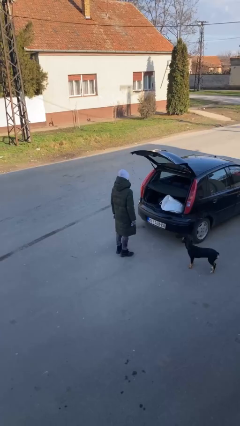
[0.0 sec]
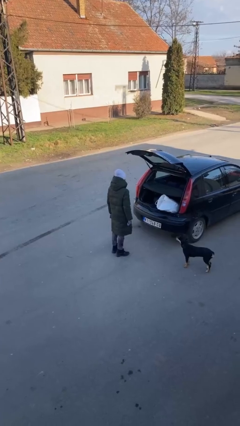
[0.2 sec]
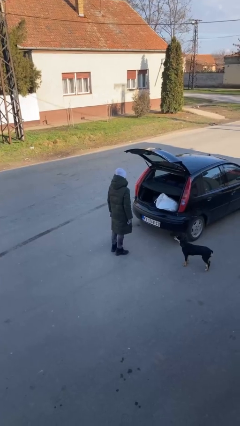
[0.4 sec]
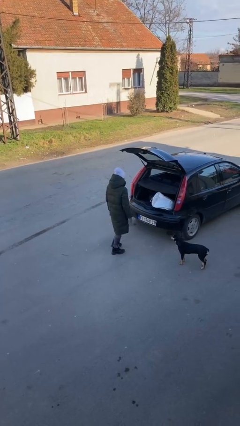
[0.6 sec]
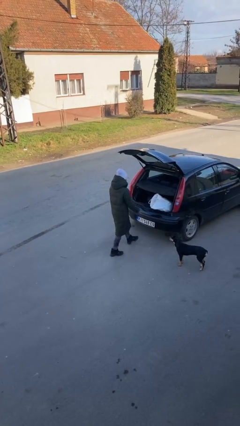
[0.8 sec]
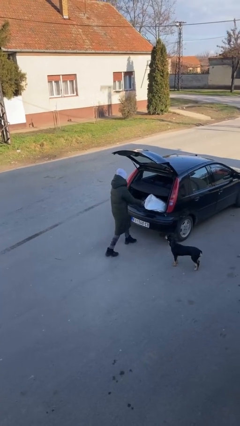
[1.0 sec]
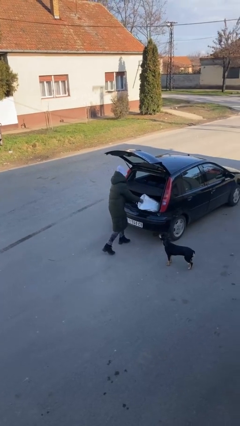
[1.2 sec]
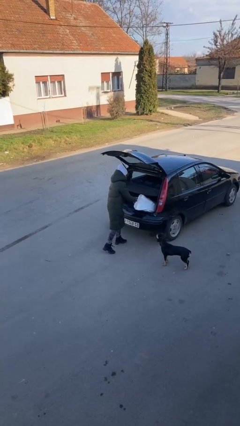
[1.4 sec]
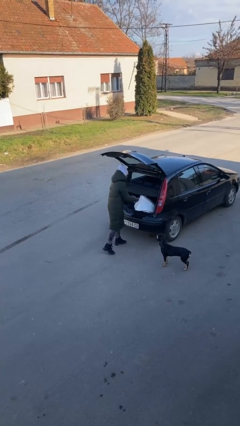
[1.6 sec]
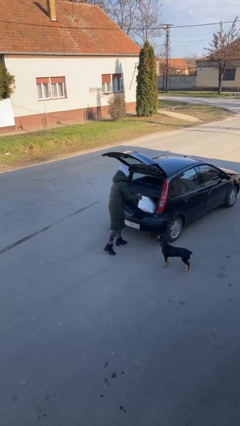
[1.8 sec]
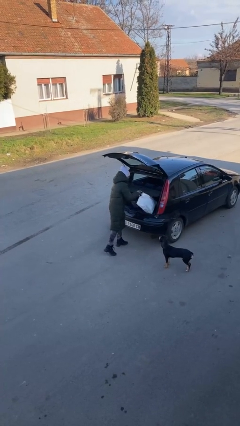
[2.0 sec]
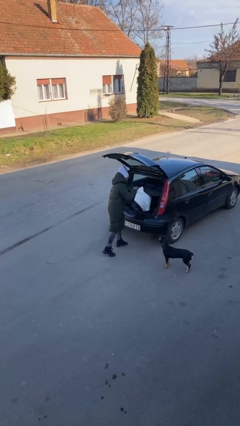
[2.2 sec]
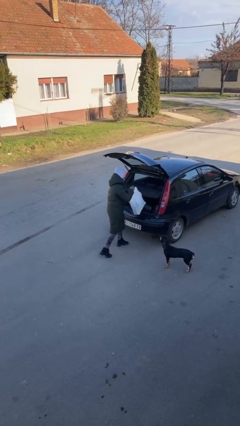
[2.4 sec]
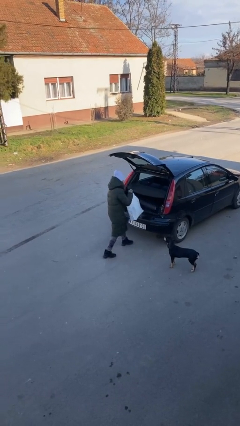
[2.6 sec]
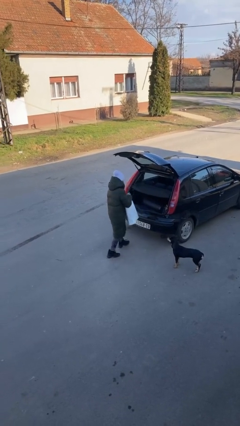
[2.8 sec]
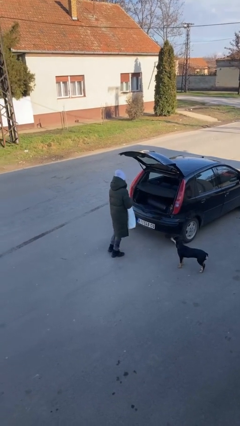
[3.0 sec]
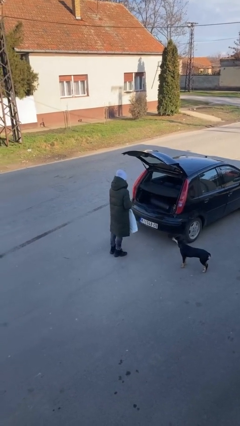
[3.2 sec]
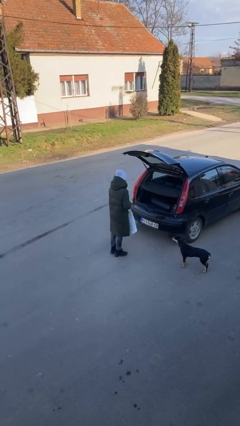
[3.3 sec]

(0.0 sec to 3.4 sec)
person unloads car

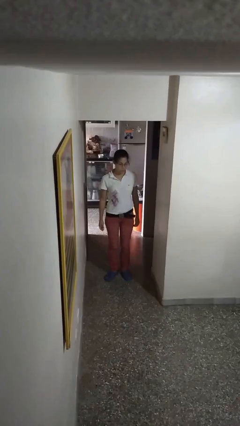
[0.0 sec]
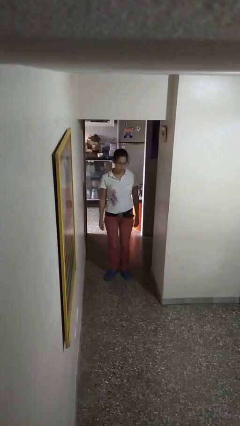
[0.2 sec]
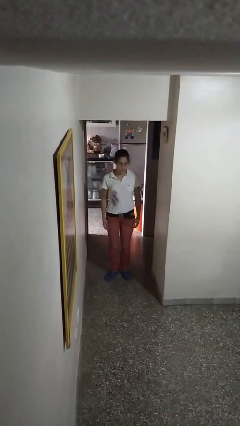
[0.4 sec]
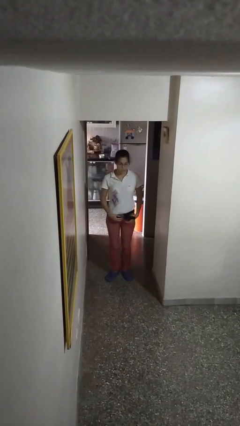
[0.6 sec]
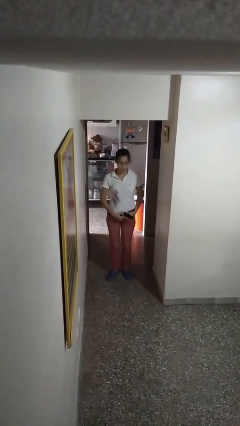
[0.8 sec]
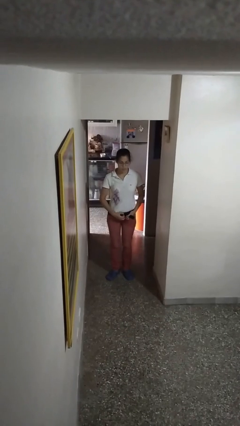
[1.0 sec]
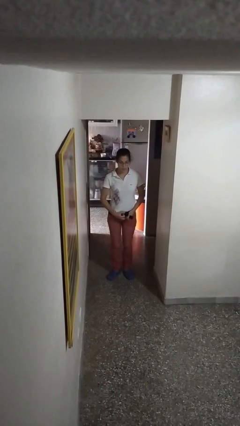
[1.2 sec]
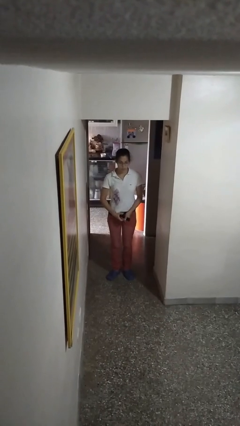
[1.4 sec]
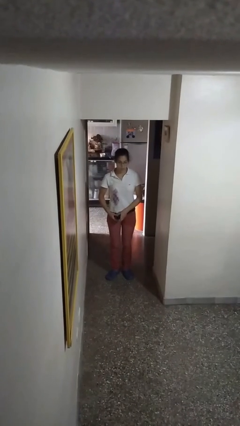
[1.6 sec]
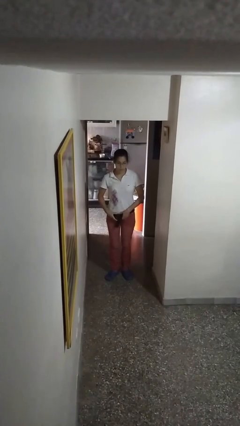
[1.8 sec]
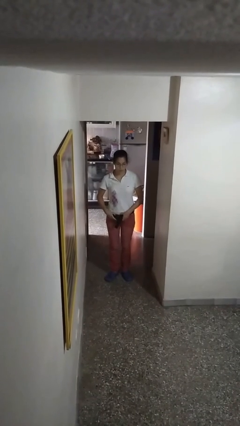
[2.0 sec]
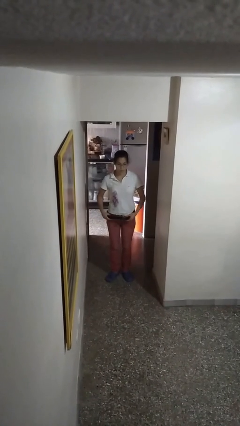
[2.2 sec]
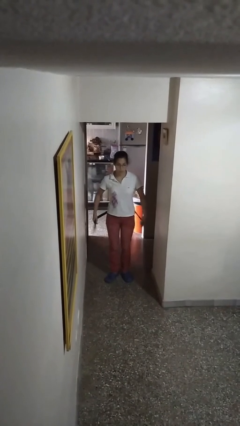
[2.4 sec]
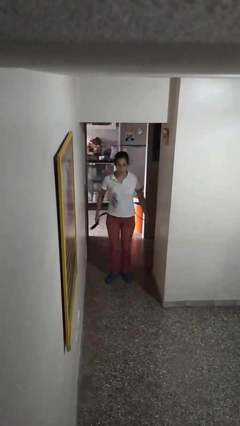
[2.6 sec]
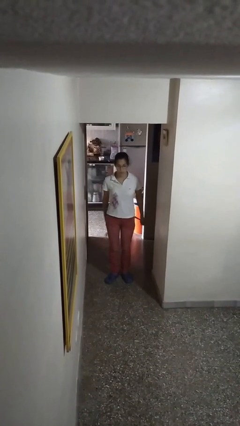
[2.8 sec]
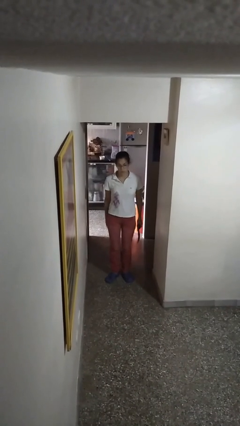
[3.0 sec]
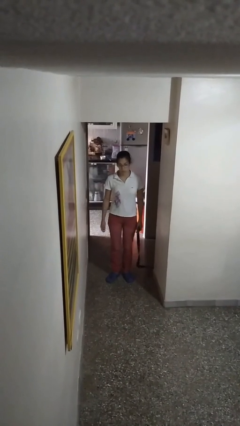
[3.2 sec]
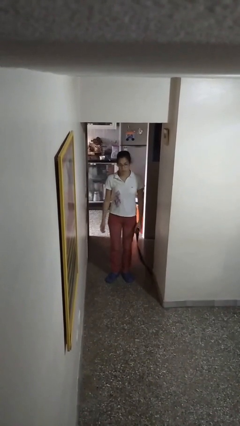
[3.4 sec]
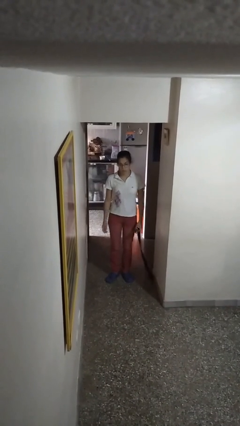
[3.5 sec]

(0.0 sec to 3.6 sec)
person takes off belt

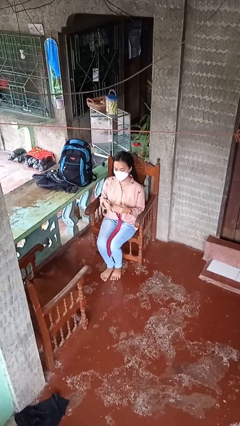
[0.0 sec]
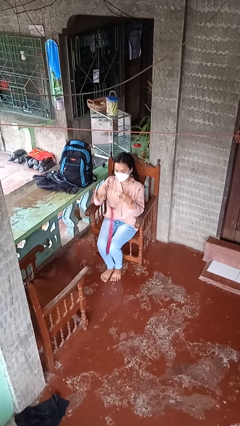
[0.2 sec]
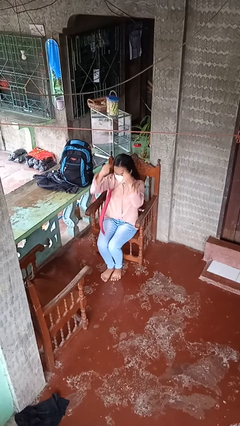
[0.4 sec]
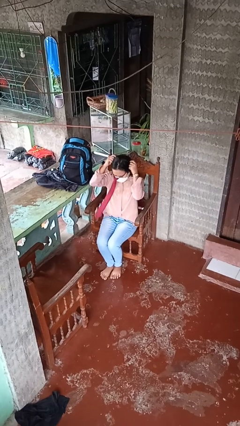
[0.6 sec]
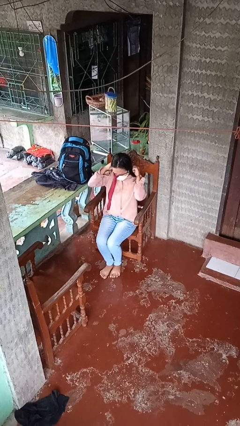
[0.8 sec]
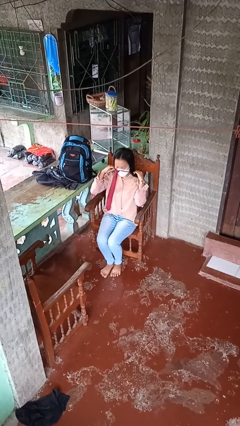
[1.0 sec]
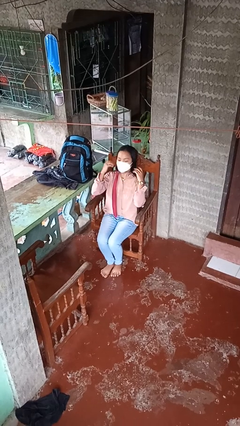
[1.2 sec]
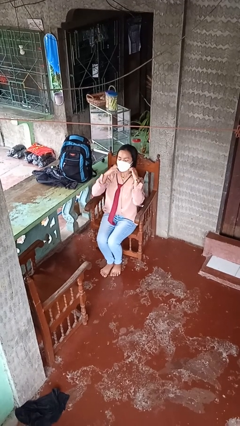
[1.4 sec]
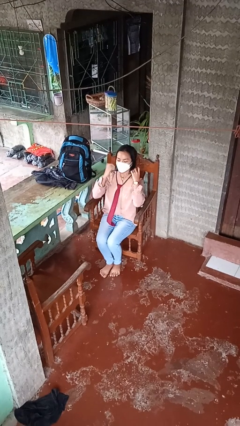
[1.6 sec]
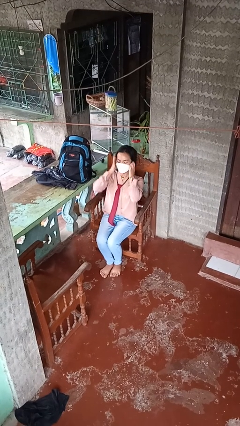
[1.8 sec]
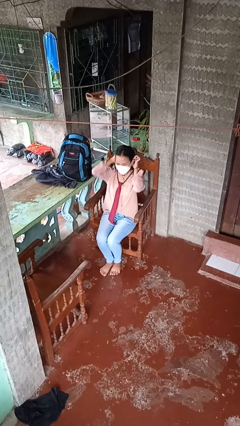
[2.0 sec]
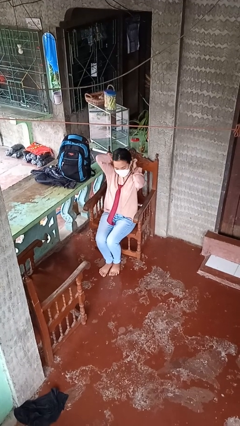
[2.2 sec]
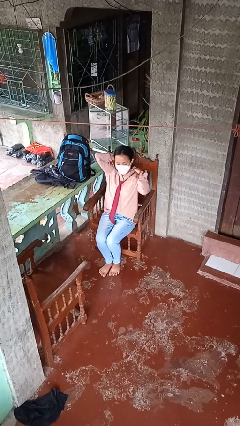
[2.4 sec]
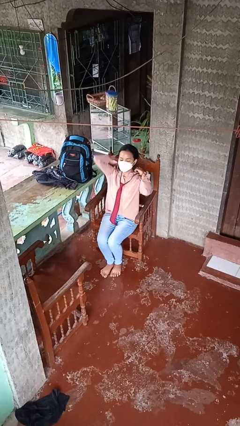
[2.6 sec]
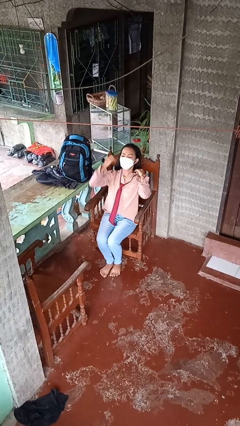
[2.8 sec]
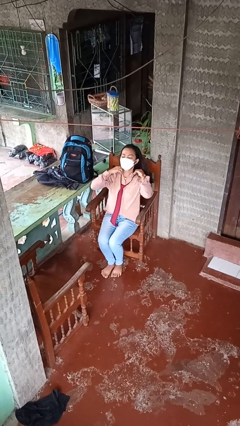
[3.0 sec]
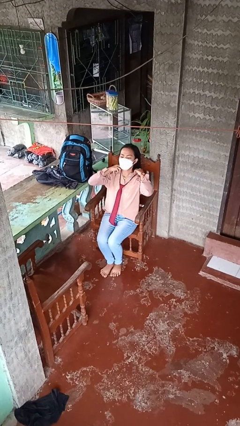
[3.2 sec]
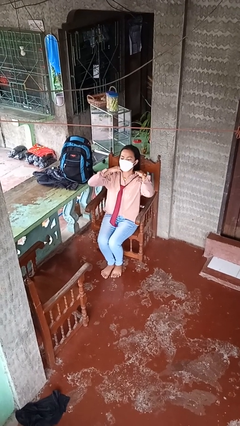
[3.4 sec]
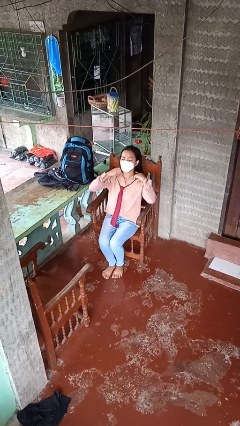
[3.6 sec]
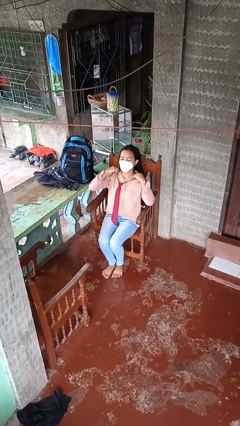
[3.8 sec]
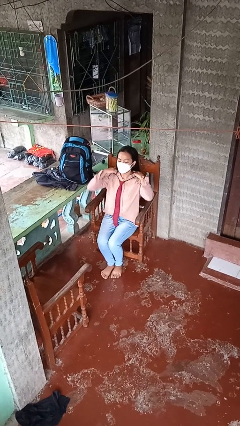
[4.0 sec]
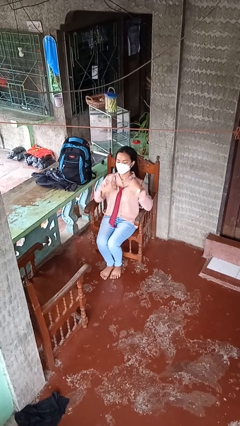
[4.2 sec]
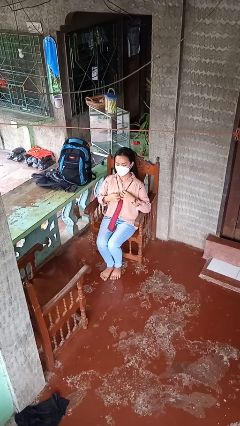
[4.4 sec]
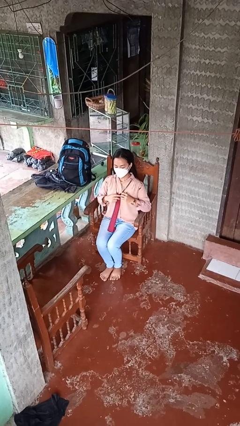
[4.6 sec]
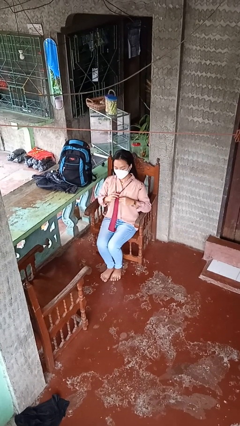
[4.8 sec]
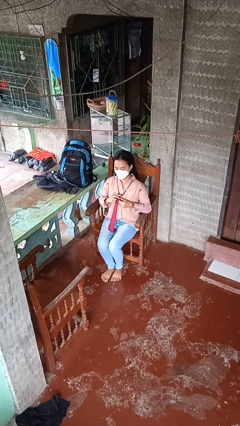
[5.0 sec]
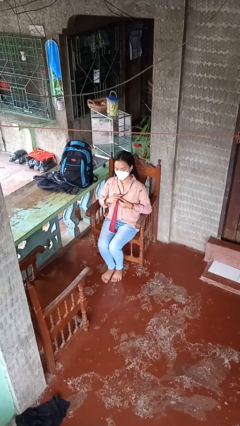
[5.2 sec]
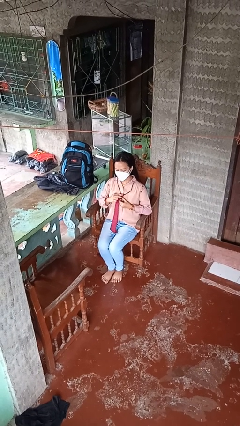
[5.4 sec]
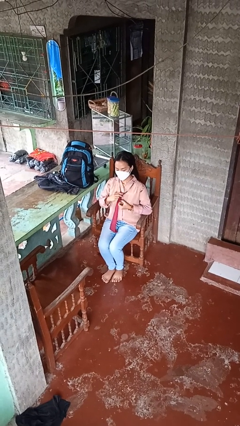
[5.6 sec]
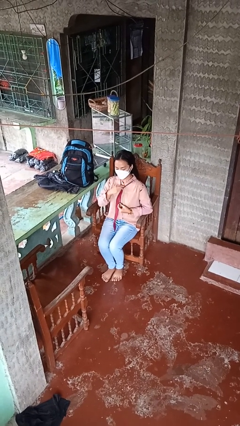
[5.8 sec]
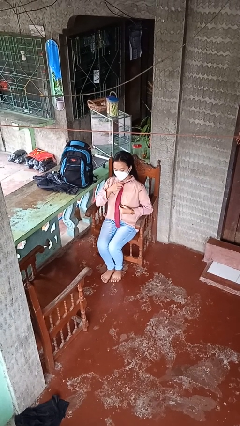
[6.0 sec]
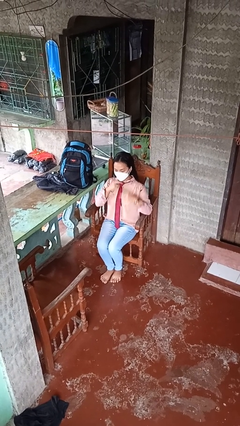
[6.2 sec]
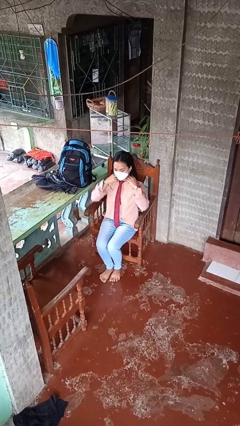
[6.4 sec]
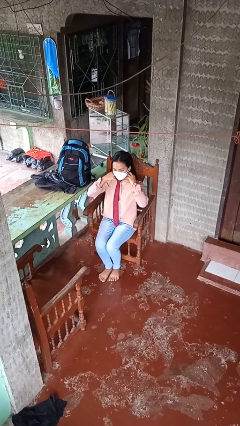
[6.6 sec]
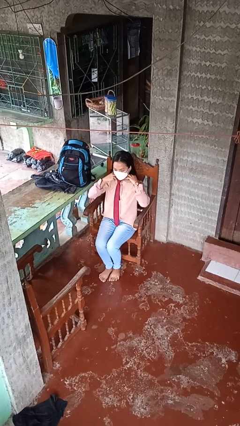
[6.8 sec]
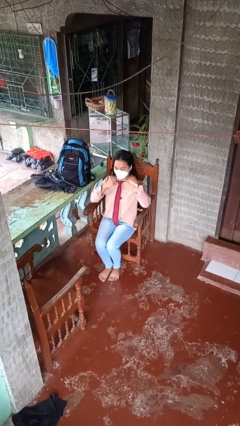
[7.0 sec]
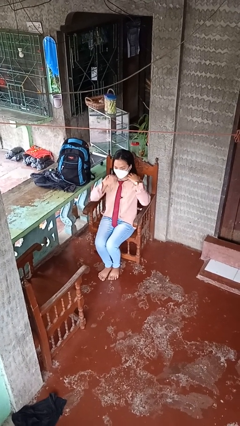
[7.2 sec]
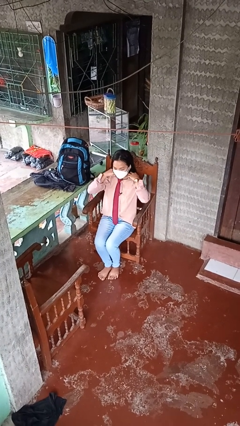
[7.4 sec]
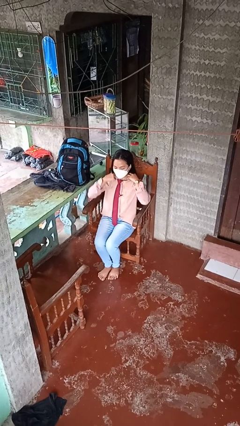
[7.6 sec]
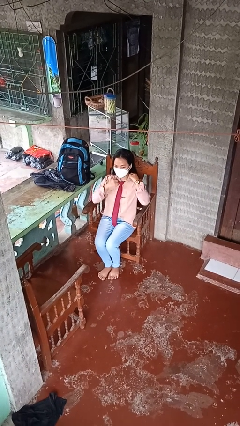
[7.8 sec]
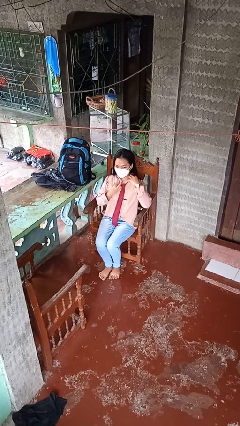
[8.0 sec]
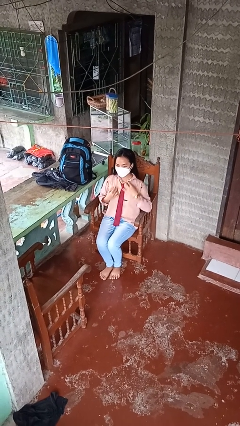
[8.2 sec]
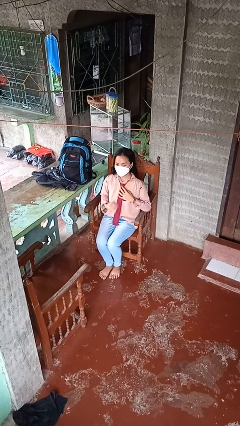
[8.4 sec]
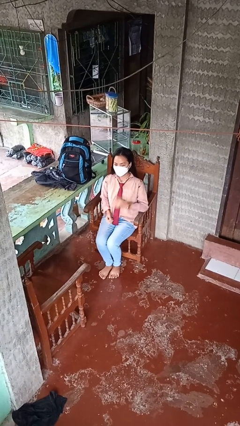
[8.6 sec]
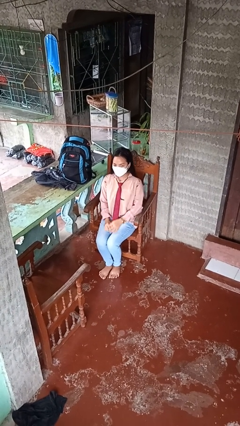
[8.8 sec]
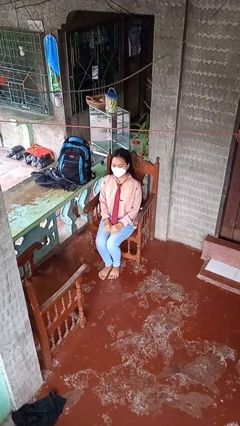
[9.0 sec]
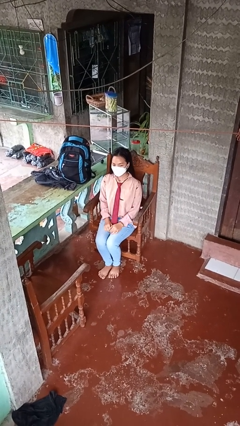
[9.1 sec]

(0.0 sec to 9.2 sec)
person puts on necktie

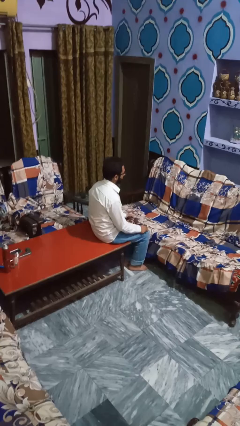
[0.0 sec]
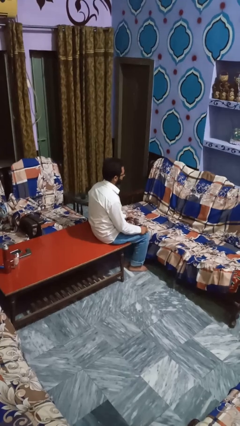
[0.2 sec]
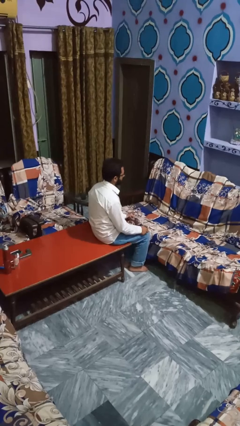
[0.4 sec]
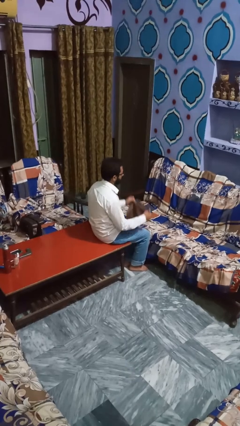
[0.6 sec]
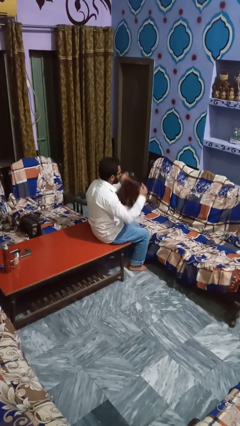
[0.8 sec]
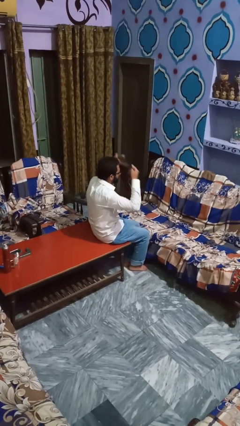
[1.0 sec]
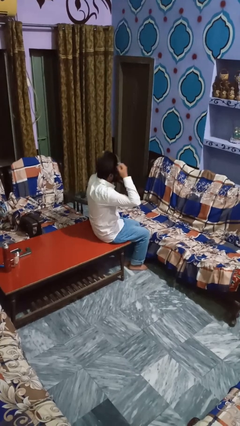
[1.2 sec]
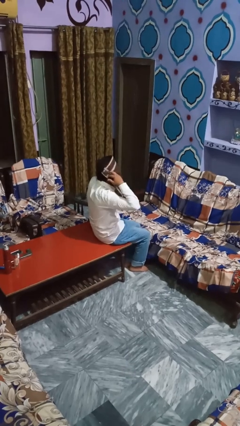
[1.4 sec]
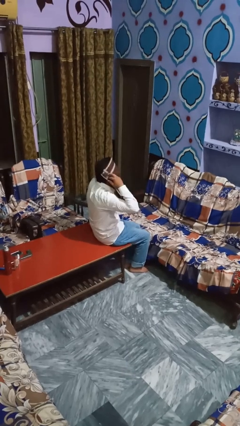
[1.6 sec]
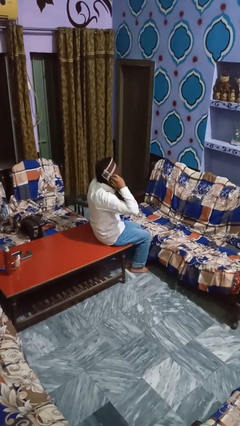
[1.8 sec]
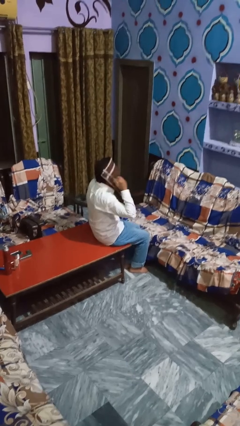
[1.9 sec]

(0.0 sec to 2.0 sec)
person yawns
